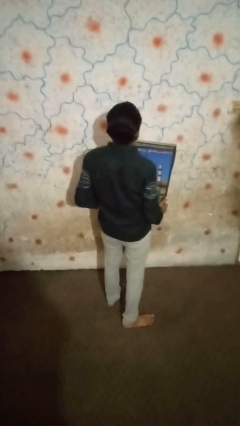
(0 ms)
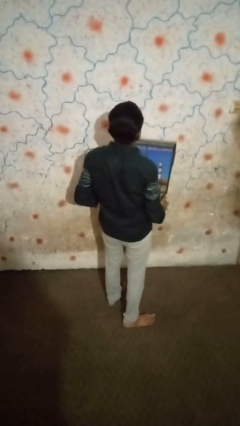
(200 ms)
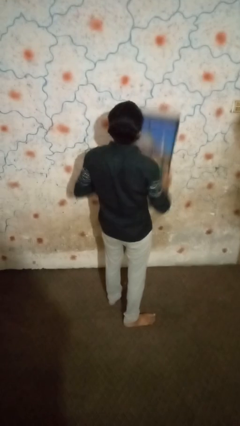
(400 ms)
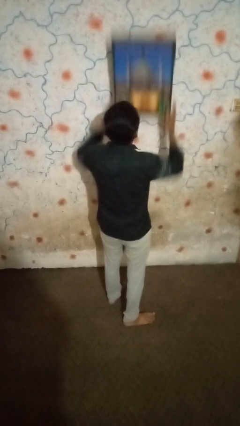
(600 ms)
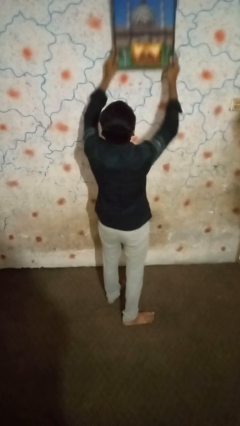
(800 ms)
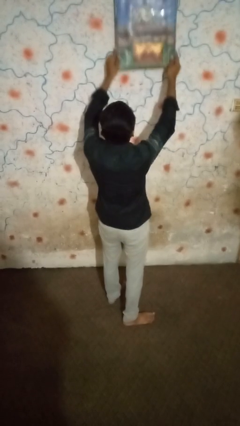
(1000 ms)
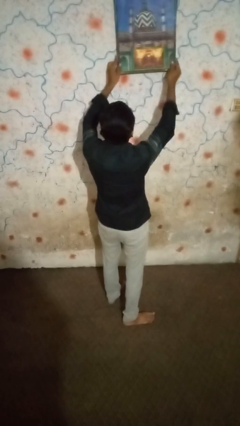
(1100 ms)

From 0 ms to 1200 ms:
person puts up picture frame

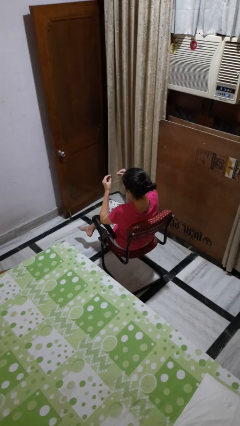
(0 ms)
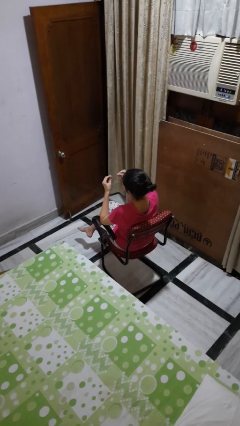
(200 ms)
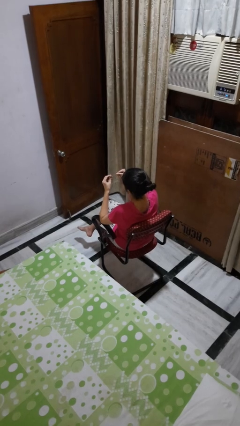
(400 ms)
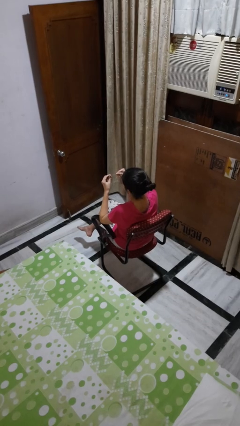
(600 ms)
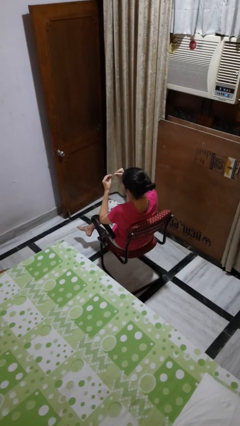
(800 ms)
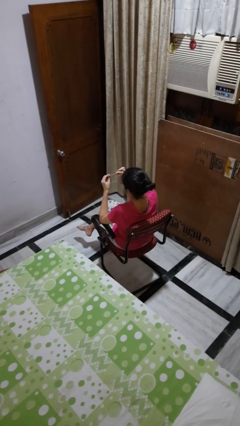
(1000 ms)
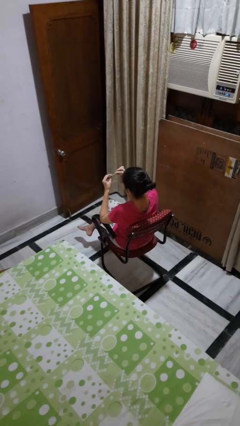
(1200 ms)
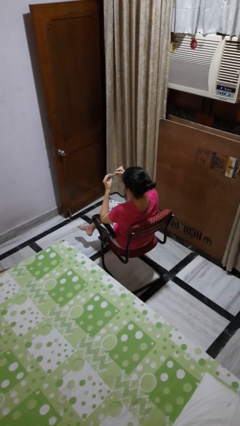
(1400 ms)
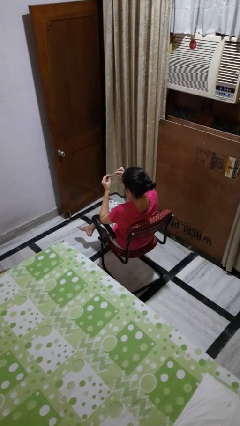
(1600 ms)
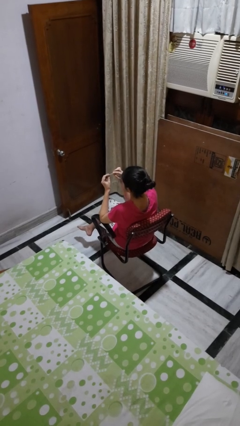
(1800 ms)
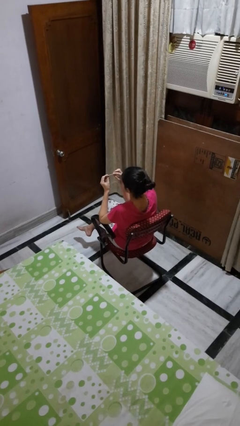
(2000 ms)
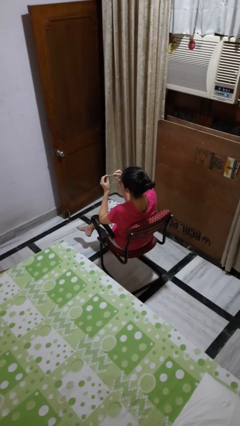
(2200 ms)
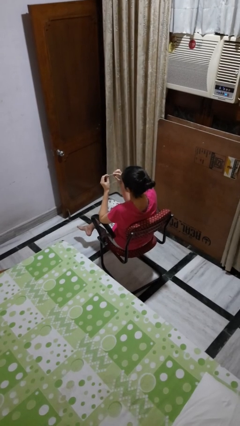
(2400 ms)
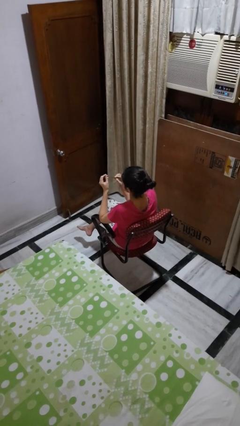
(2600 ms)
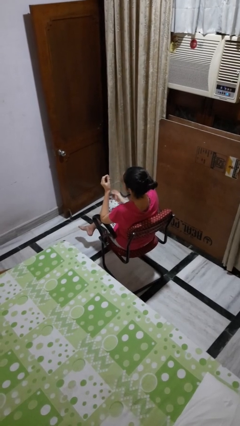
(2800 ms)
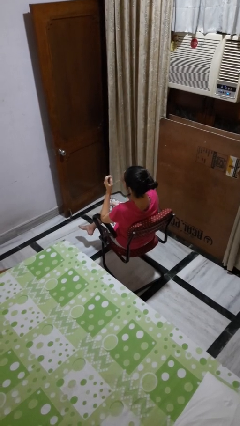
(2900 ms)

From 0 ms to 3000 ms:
person files fingernails

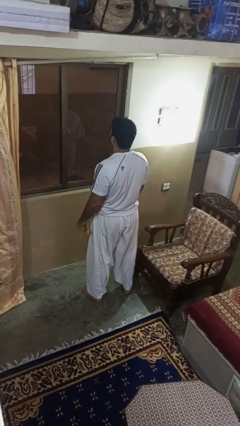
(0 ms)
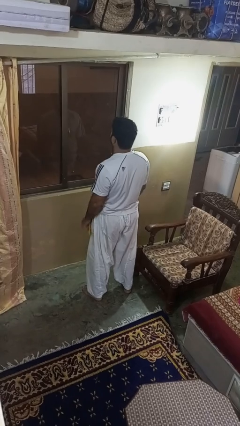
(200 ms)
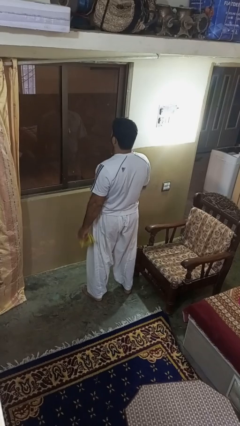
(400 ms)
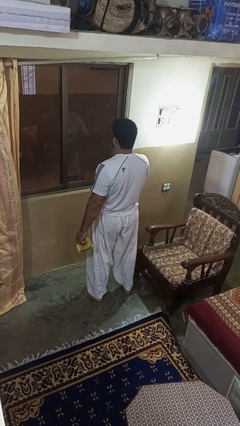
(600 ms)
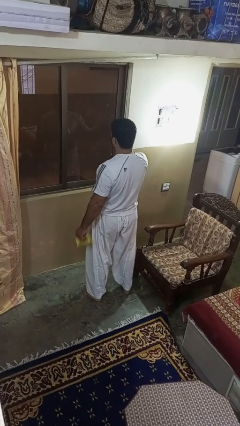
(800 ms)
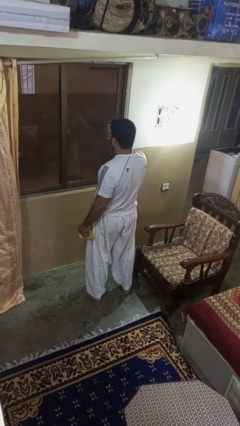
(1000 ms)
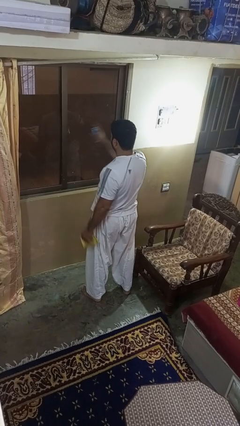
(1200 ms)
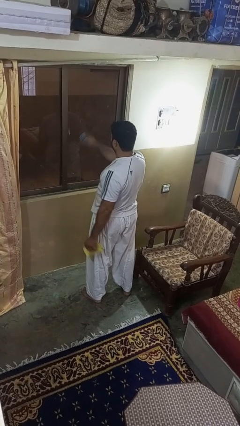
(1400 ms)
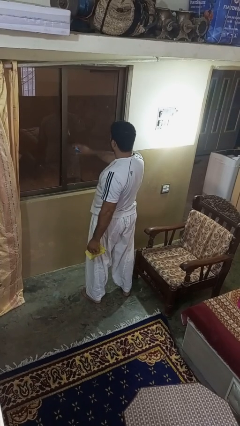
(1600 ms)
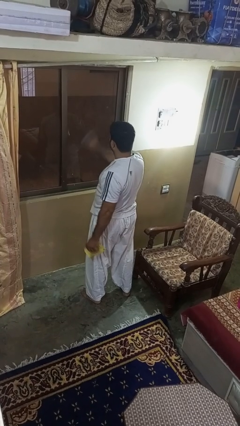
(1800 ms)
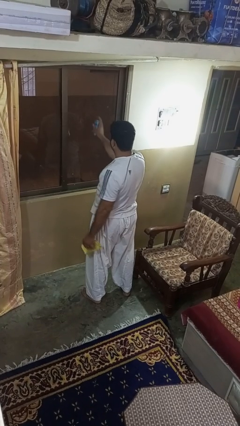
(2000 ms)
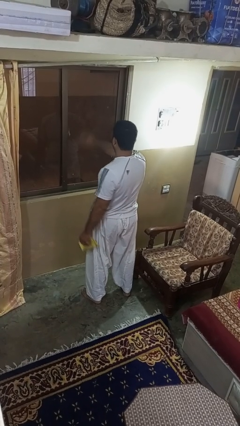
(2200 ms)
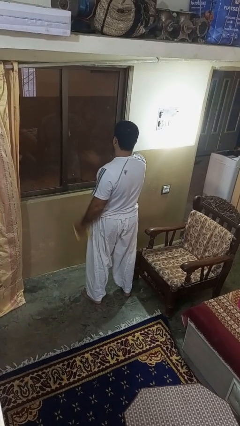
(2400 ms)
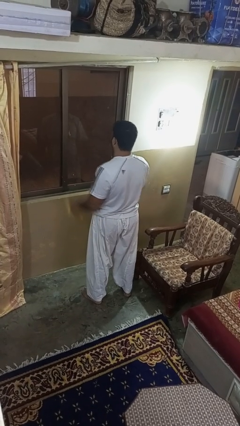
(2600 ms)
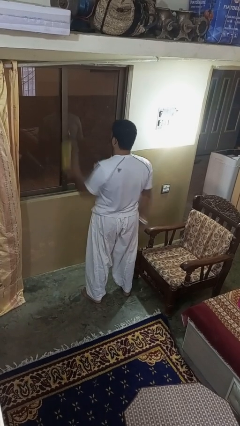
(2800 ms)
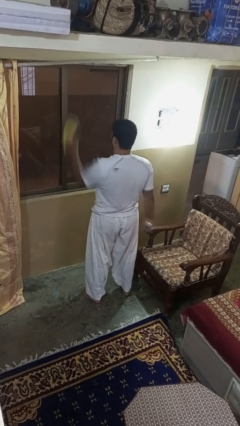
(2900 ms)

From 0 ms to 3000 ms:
person sprays from bottle

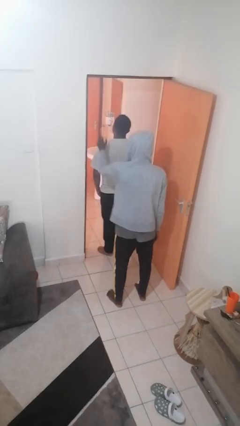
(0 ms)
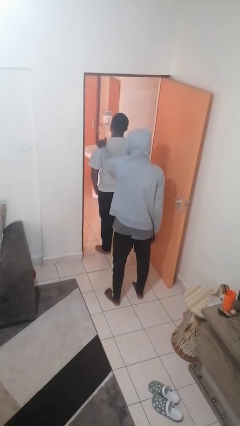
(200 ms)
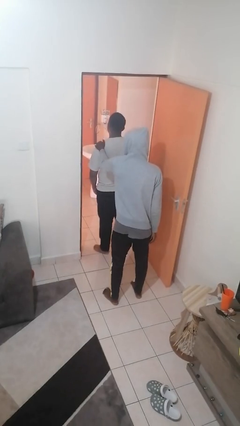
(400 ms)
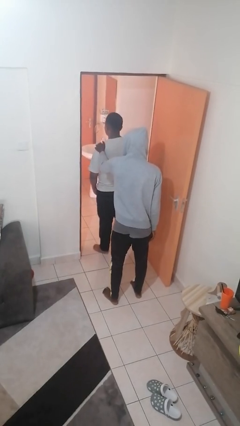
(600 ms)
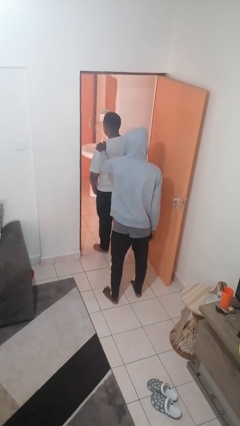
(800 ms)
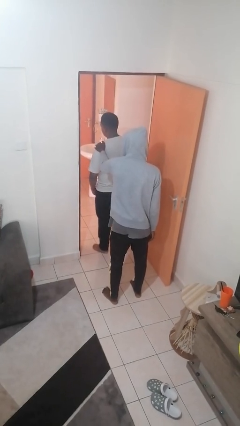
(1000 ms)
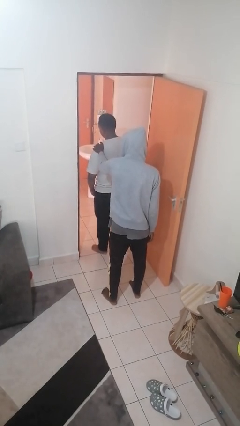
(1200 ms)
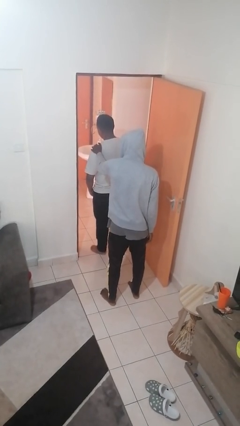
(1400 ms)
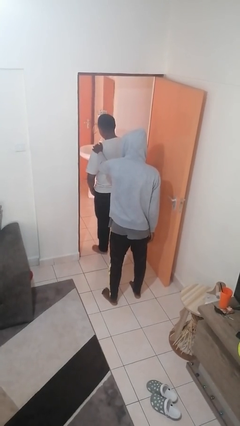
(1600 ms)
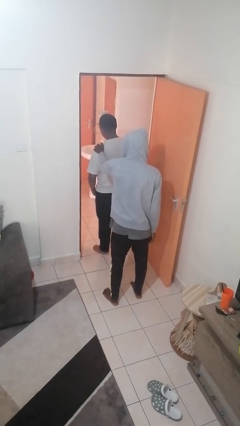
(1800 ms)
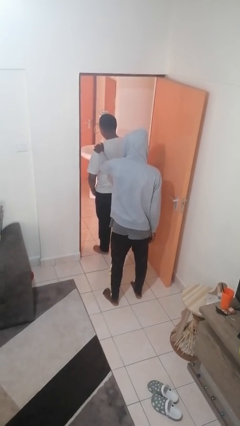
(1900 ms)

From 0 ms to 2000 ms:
person grabs person by shoulder

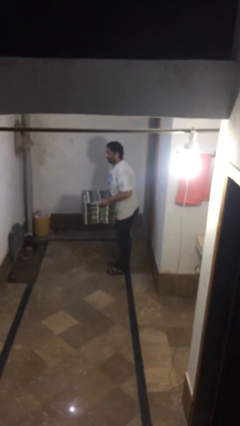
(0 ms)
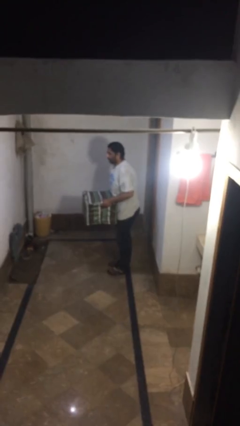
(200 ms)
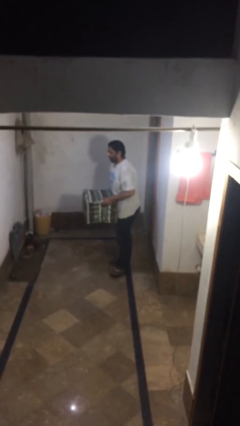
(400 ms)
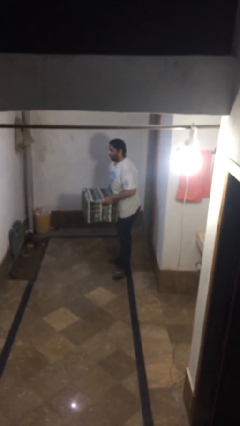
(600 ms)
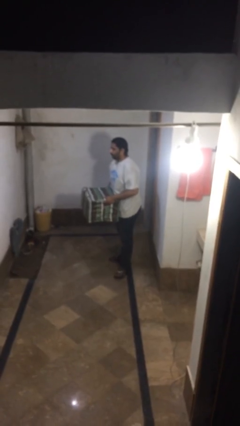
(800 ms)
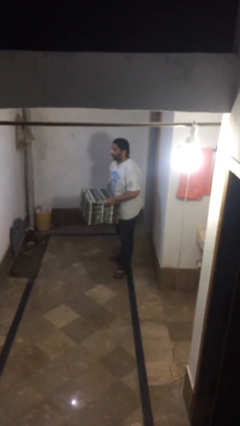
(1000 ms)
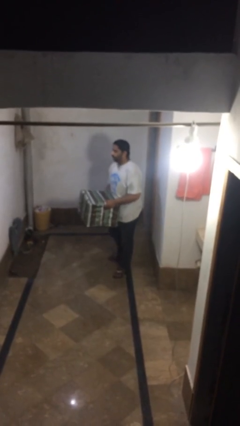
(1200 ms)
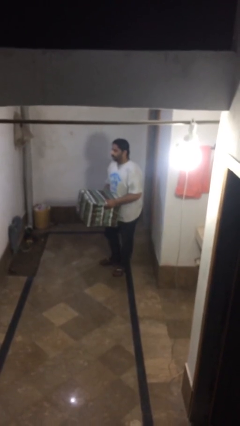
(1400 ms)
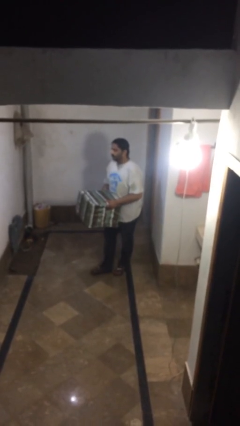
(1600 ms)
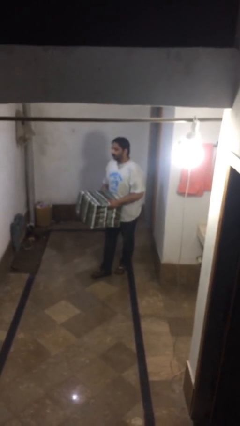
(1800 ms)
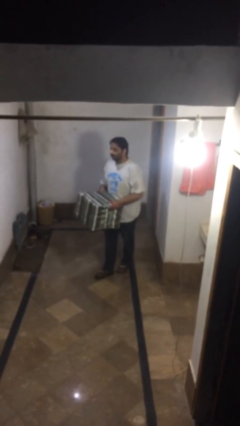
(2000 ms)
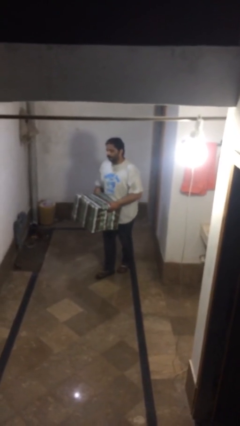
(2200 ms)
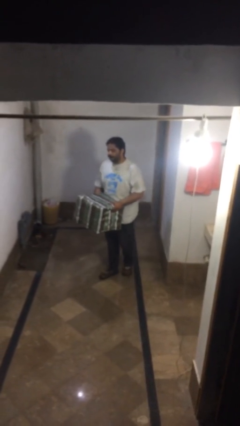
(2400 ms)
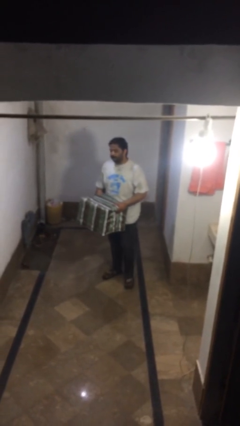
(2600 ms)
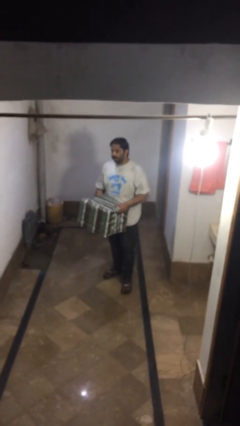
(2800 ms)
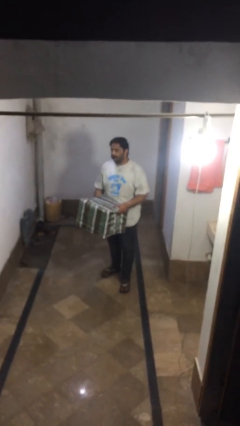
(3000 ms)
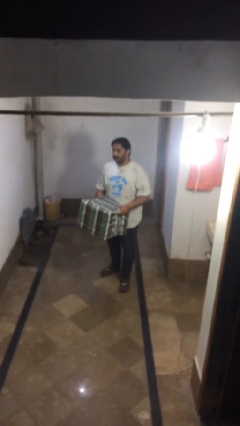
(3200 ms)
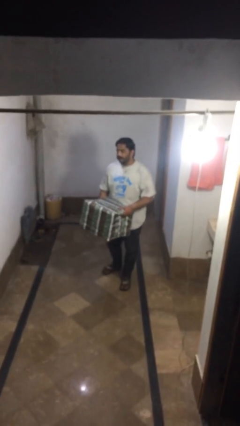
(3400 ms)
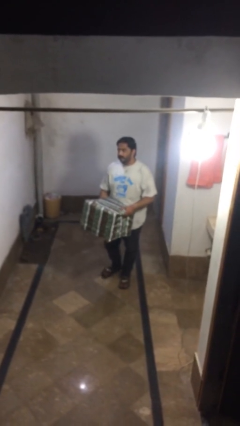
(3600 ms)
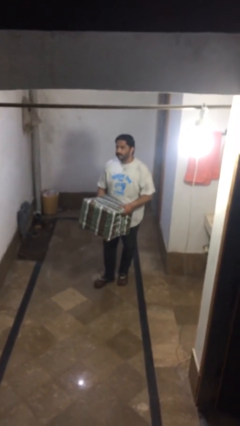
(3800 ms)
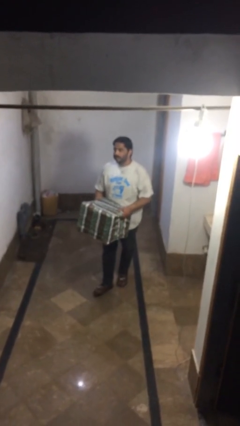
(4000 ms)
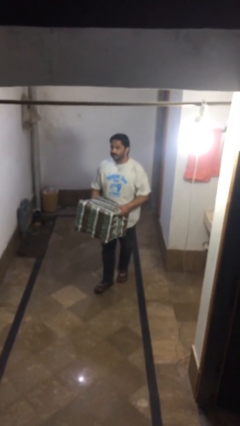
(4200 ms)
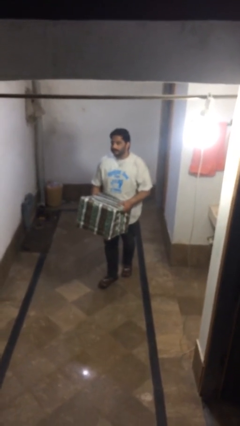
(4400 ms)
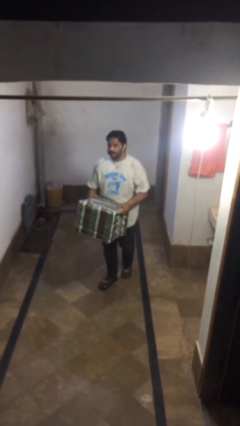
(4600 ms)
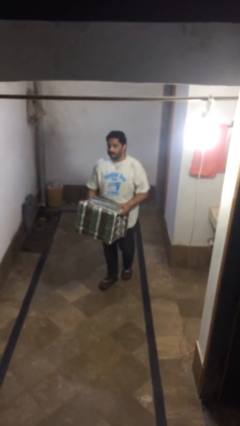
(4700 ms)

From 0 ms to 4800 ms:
person carries heavy object

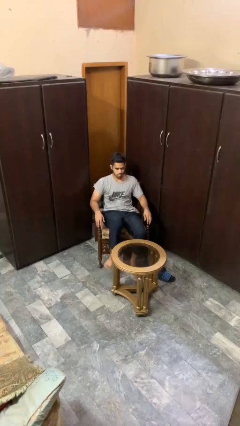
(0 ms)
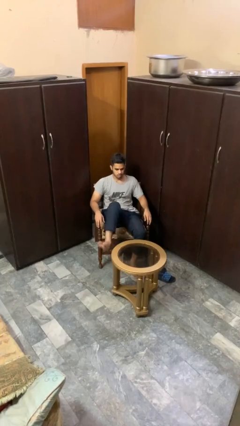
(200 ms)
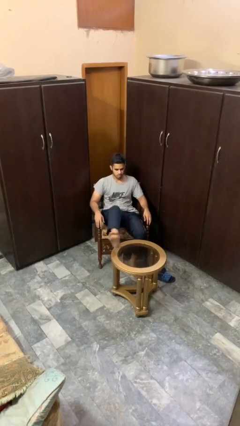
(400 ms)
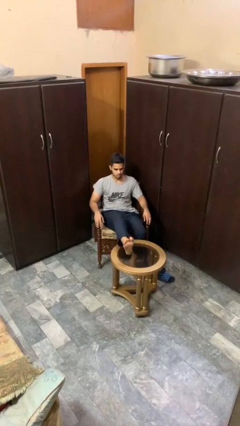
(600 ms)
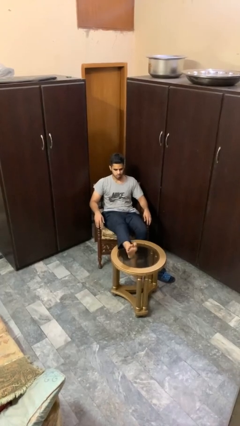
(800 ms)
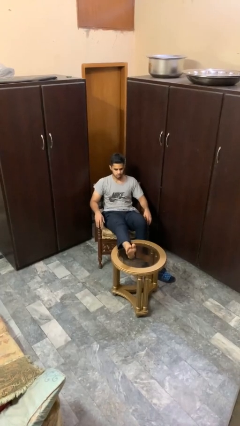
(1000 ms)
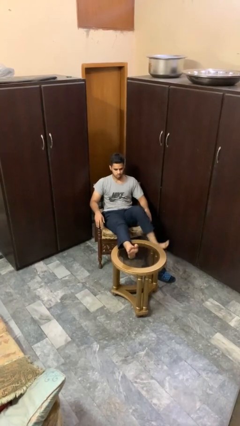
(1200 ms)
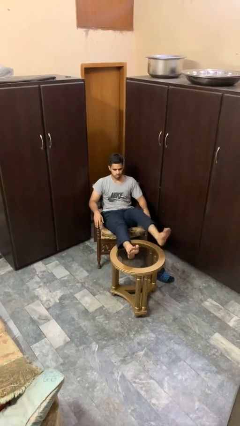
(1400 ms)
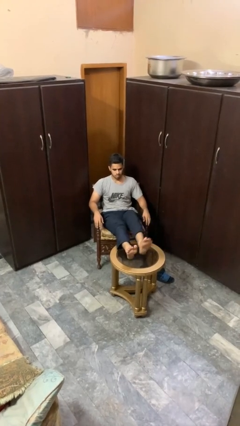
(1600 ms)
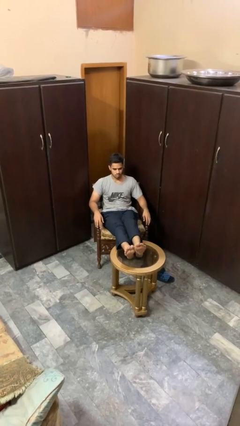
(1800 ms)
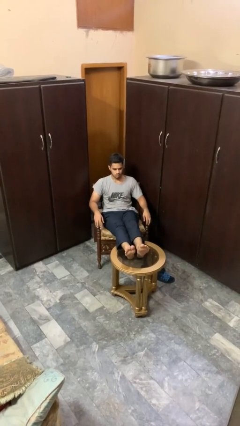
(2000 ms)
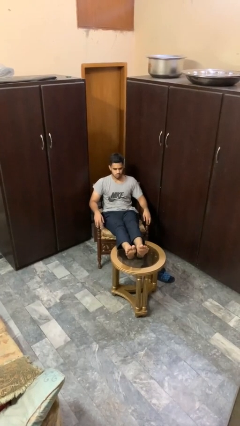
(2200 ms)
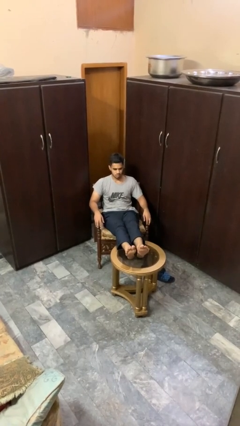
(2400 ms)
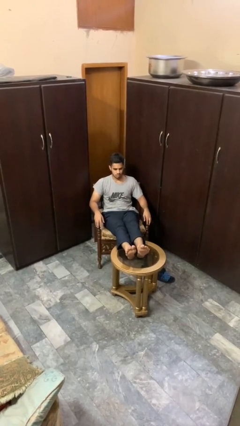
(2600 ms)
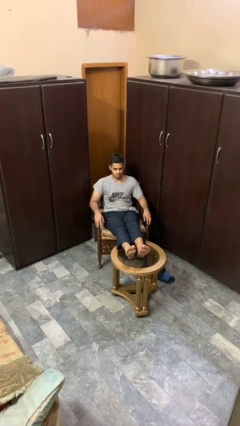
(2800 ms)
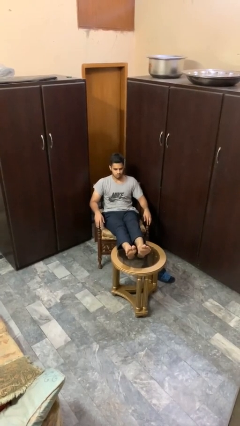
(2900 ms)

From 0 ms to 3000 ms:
person puts feet up

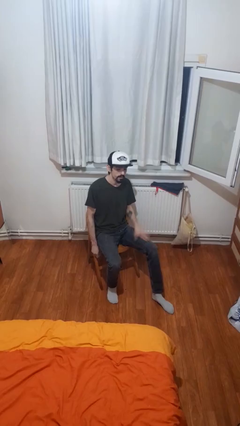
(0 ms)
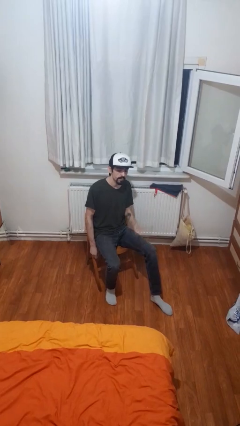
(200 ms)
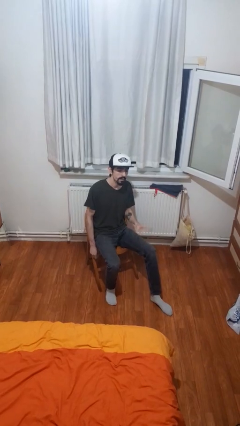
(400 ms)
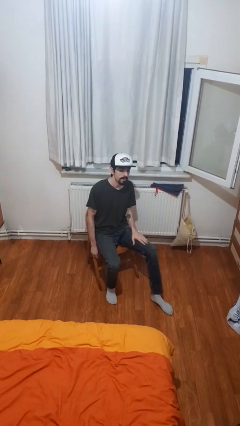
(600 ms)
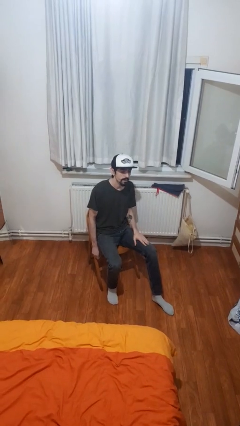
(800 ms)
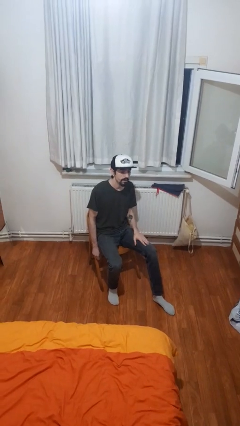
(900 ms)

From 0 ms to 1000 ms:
person slaps hands on thighs
